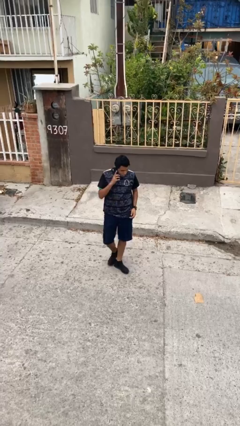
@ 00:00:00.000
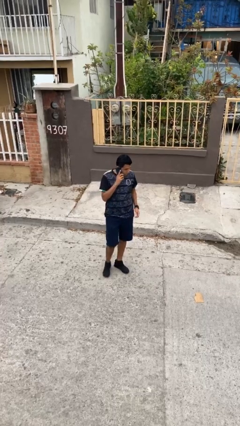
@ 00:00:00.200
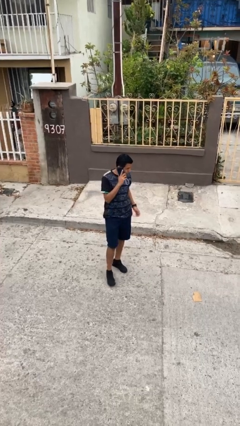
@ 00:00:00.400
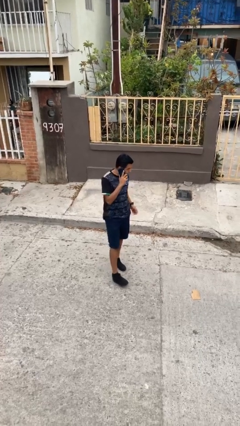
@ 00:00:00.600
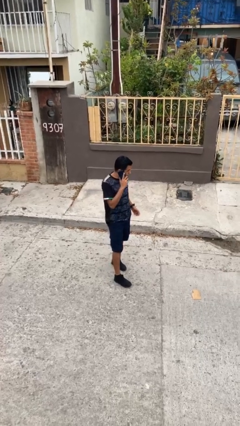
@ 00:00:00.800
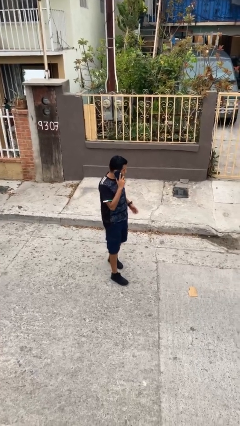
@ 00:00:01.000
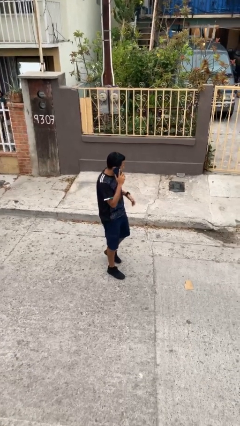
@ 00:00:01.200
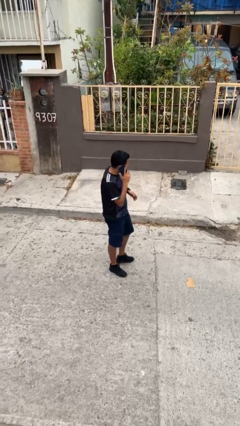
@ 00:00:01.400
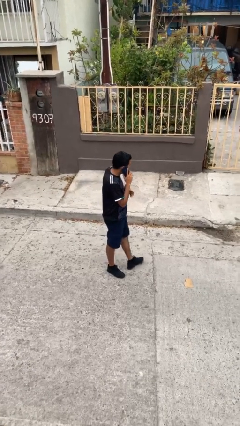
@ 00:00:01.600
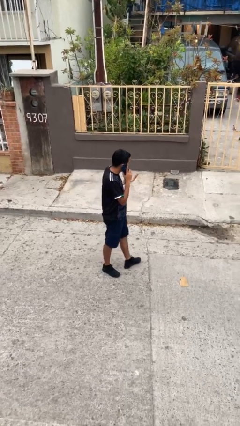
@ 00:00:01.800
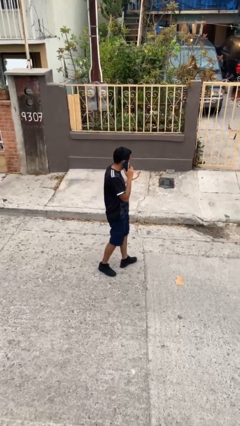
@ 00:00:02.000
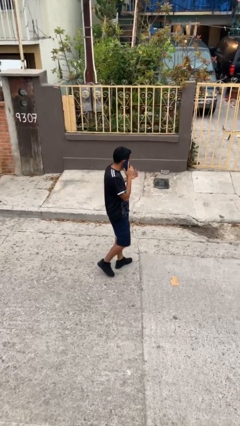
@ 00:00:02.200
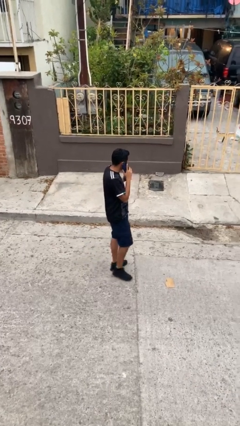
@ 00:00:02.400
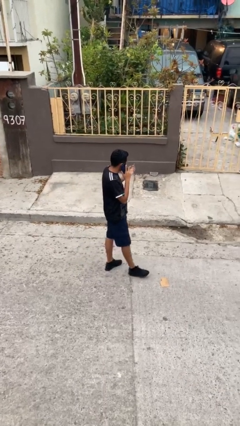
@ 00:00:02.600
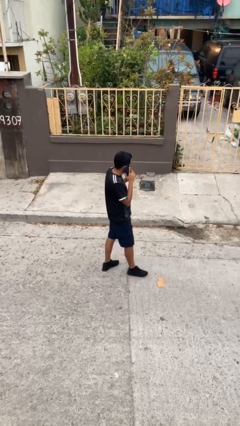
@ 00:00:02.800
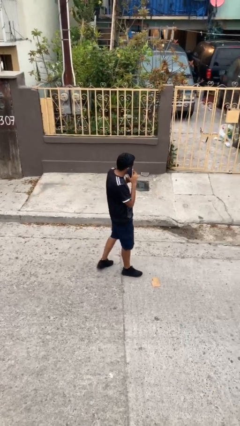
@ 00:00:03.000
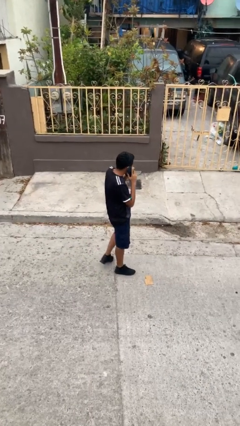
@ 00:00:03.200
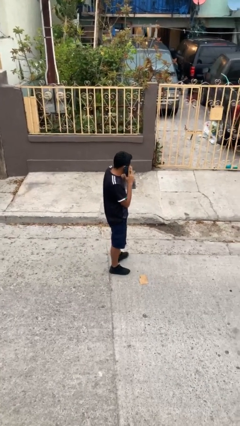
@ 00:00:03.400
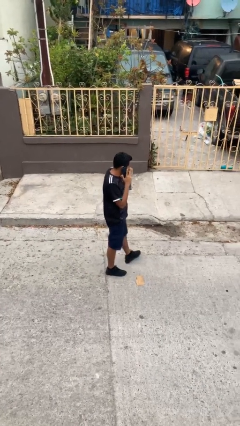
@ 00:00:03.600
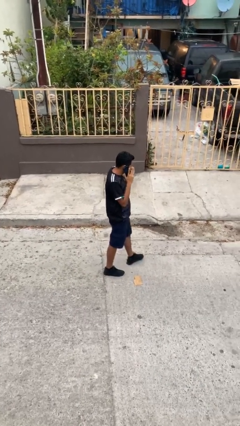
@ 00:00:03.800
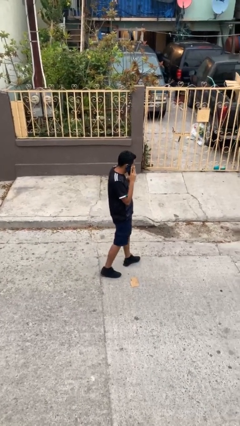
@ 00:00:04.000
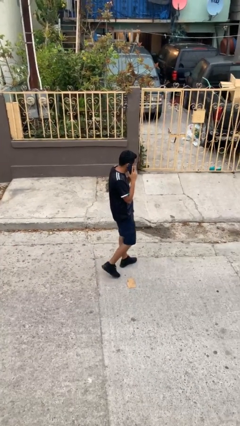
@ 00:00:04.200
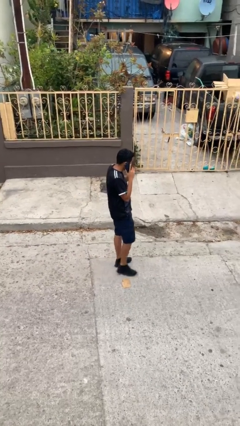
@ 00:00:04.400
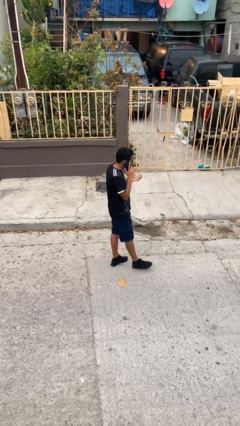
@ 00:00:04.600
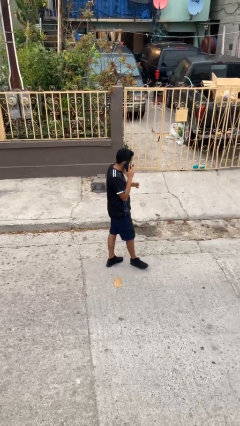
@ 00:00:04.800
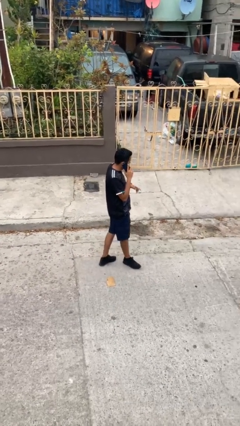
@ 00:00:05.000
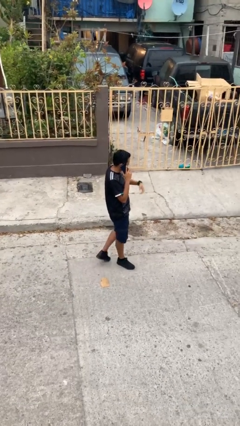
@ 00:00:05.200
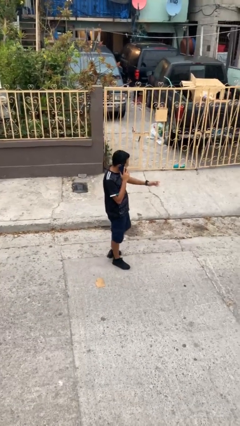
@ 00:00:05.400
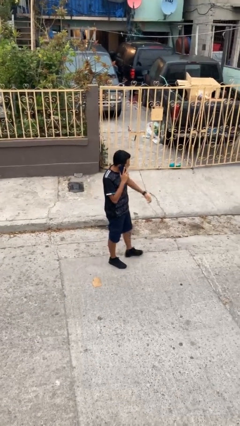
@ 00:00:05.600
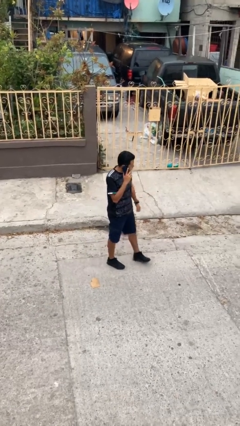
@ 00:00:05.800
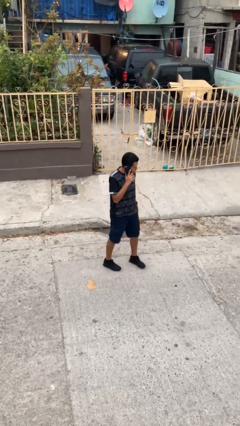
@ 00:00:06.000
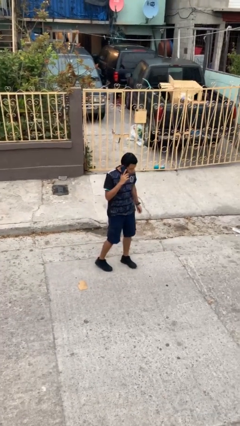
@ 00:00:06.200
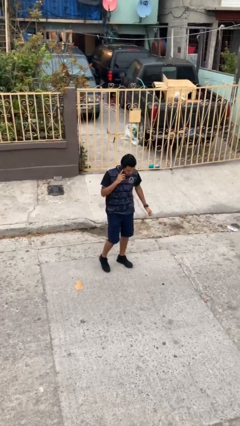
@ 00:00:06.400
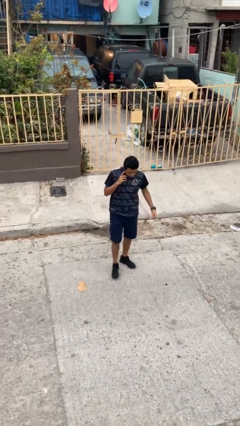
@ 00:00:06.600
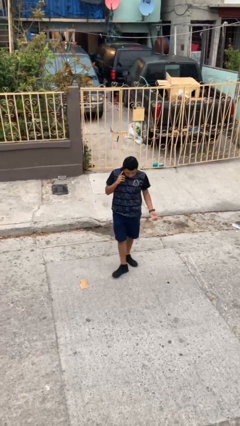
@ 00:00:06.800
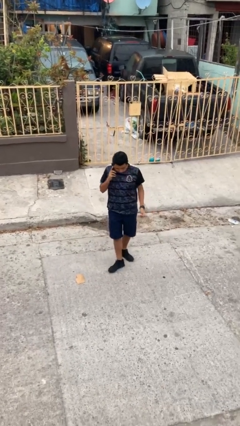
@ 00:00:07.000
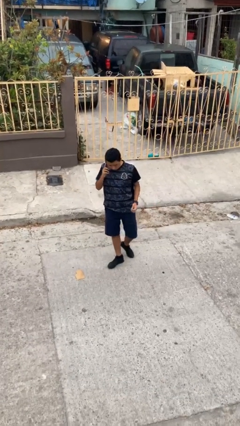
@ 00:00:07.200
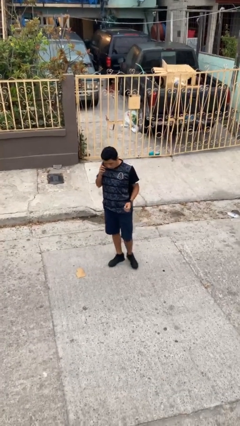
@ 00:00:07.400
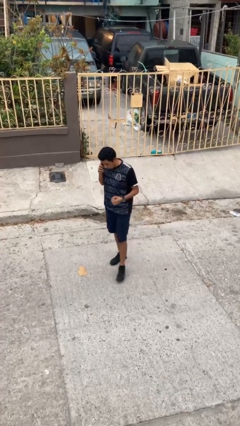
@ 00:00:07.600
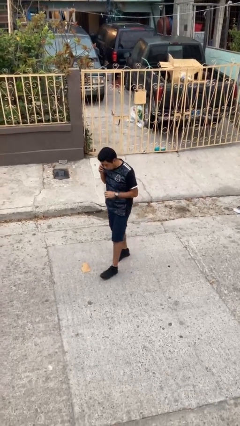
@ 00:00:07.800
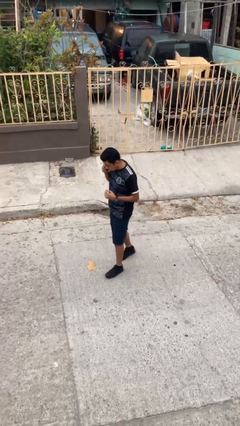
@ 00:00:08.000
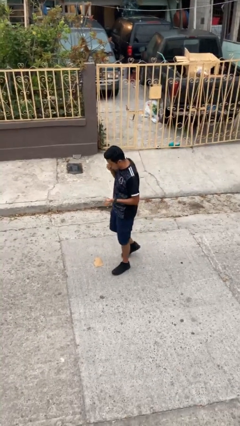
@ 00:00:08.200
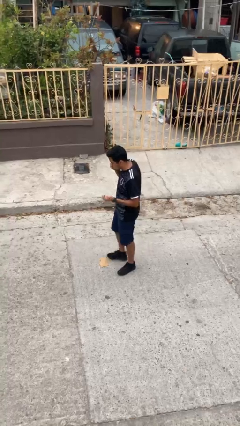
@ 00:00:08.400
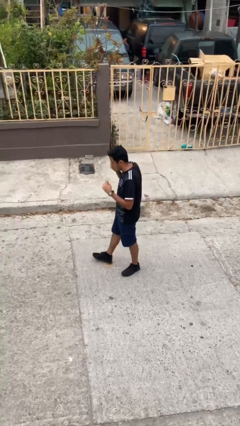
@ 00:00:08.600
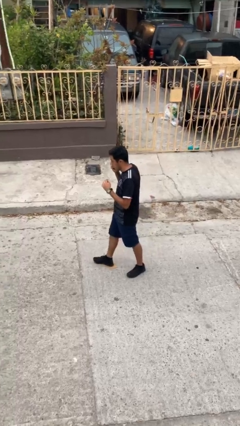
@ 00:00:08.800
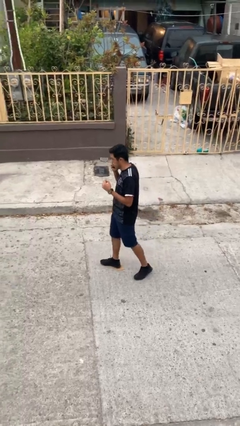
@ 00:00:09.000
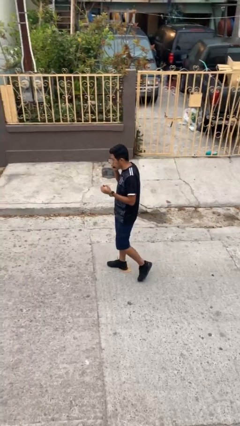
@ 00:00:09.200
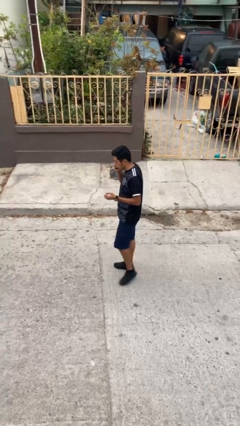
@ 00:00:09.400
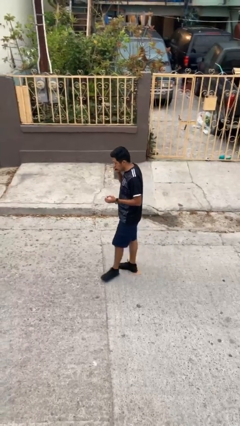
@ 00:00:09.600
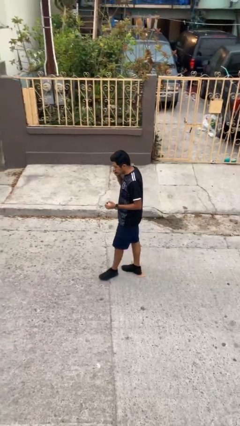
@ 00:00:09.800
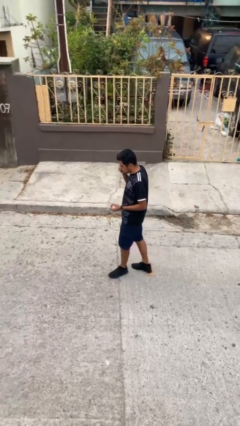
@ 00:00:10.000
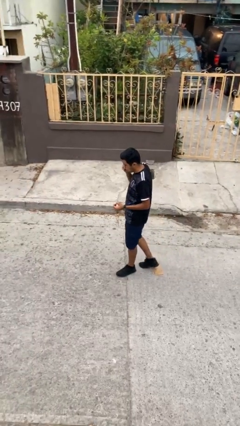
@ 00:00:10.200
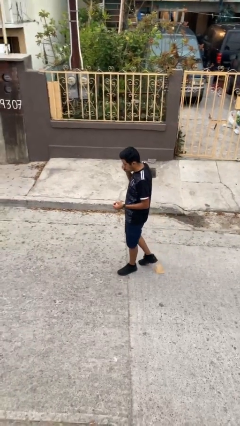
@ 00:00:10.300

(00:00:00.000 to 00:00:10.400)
person talks on phone

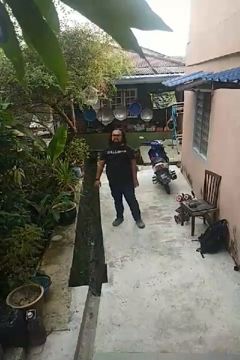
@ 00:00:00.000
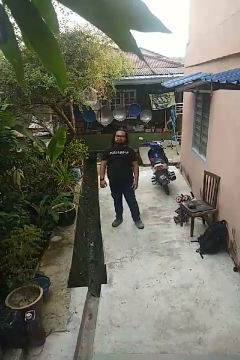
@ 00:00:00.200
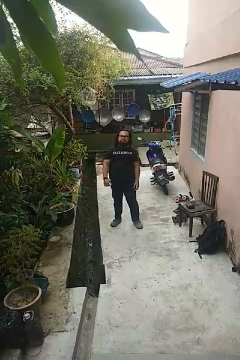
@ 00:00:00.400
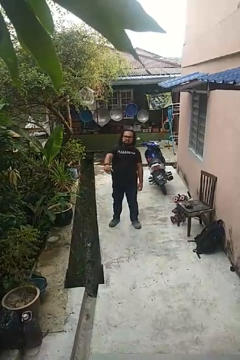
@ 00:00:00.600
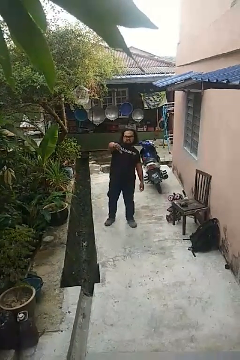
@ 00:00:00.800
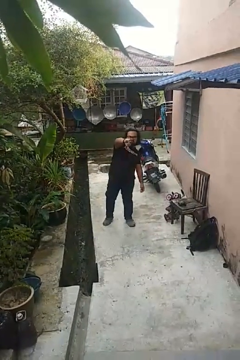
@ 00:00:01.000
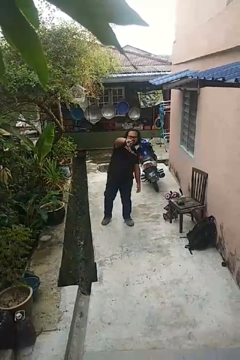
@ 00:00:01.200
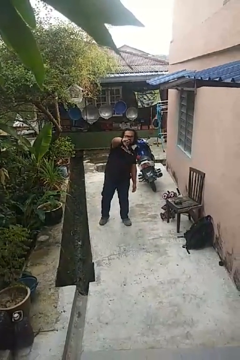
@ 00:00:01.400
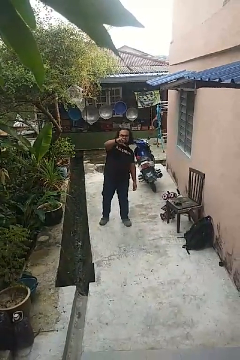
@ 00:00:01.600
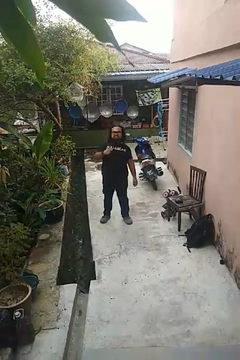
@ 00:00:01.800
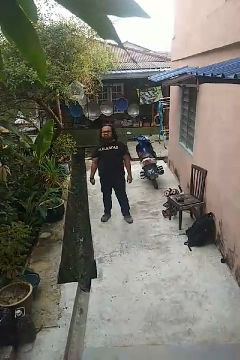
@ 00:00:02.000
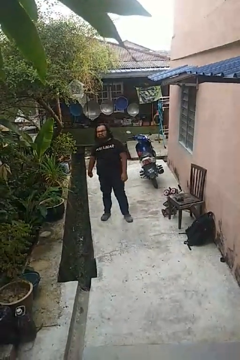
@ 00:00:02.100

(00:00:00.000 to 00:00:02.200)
person gestures thumbs down

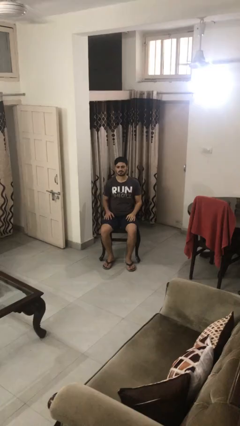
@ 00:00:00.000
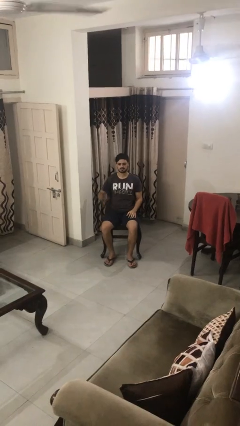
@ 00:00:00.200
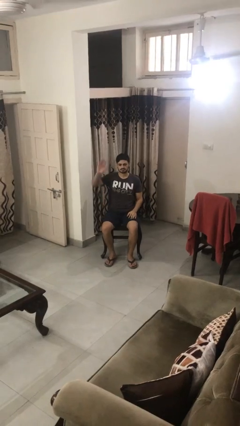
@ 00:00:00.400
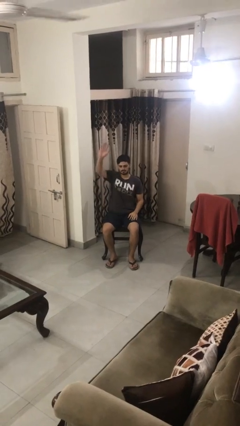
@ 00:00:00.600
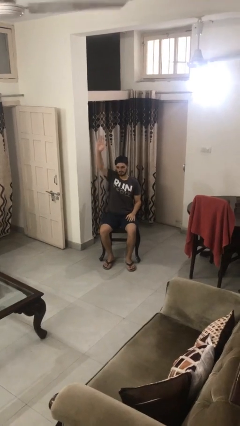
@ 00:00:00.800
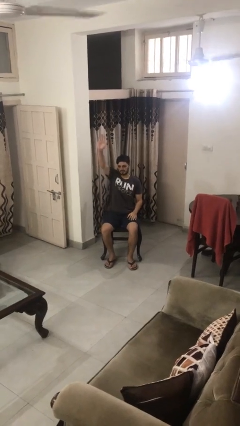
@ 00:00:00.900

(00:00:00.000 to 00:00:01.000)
person gestures raise hand

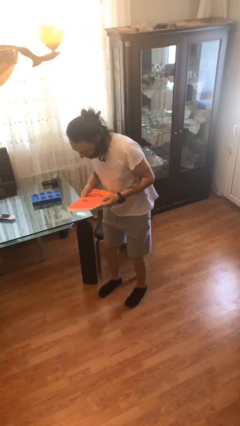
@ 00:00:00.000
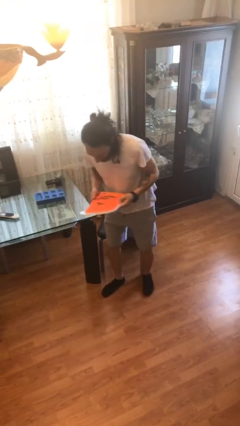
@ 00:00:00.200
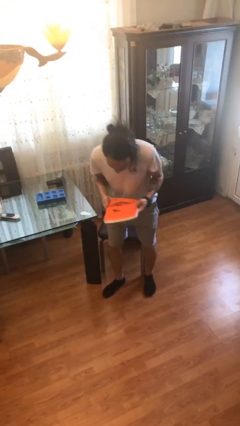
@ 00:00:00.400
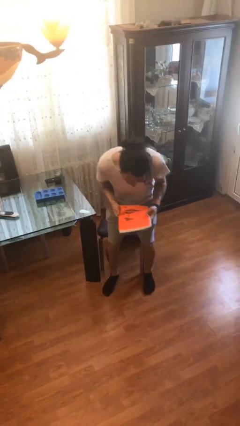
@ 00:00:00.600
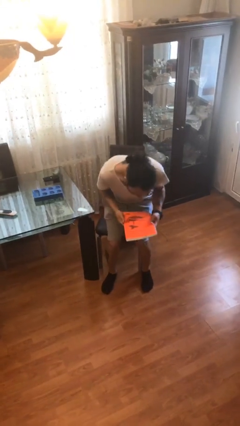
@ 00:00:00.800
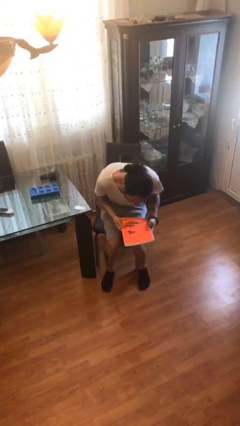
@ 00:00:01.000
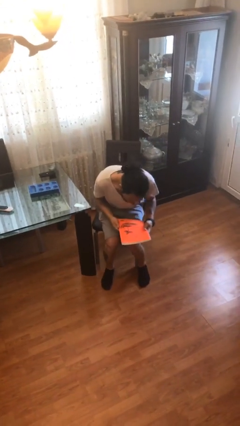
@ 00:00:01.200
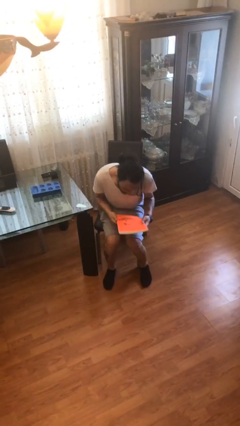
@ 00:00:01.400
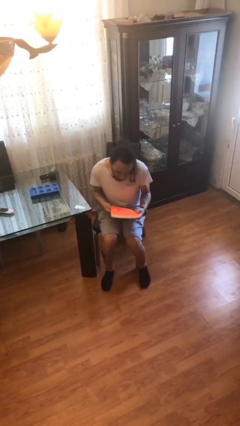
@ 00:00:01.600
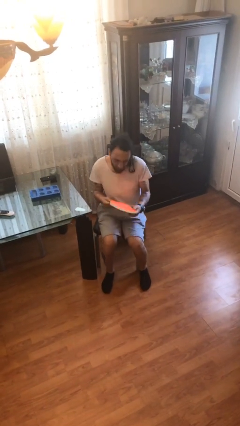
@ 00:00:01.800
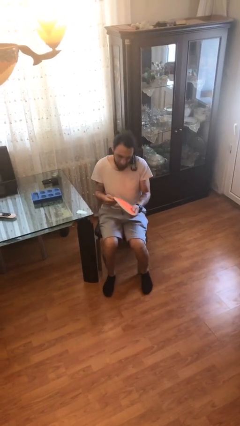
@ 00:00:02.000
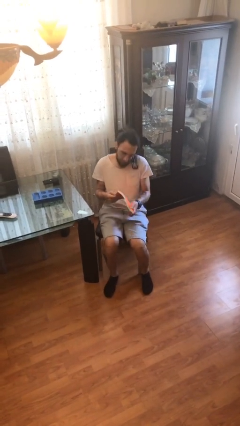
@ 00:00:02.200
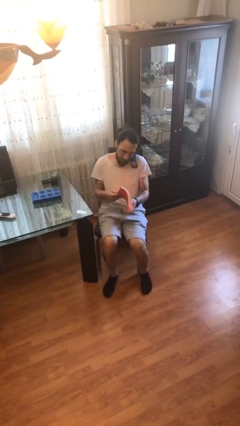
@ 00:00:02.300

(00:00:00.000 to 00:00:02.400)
person sits down

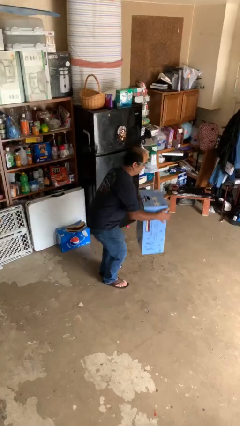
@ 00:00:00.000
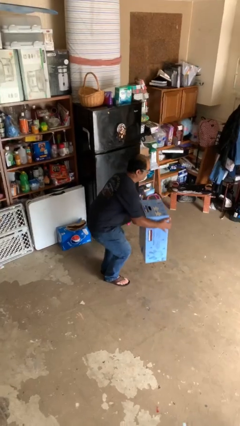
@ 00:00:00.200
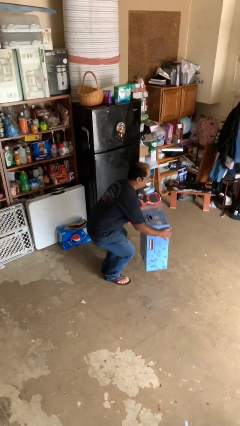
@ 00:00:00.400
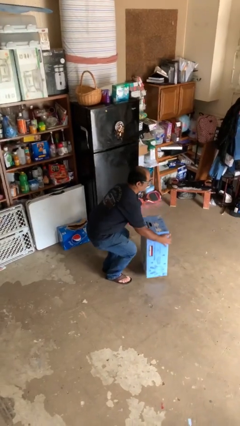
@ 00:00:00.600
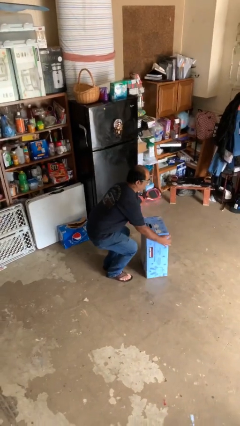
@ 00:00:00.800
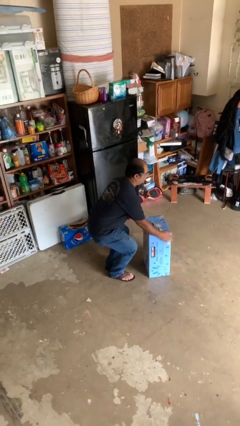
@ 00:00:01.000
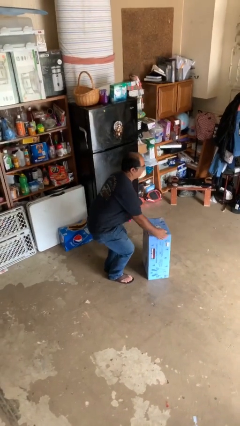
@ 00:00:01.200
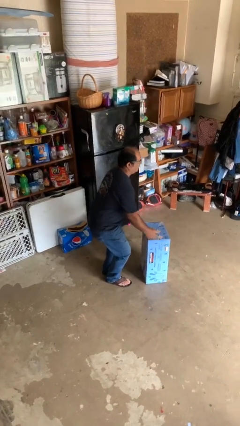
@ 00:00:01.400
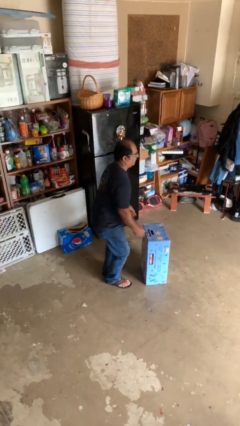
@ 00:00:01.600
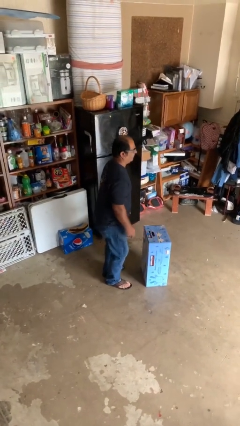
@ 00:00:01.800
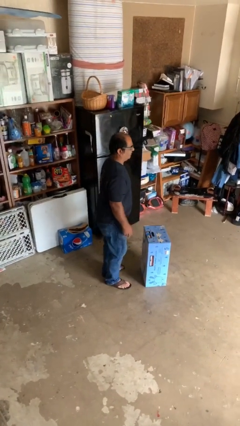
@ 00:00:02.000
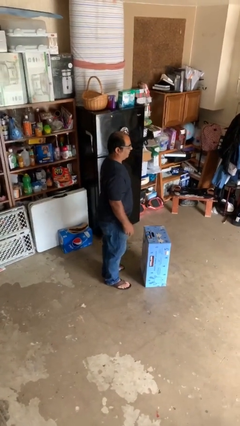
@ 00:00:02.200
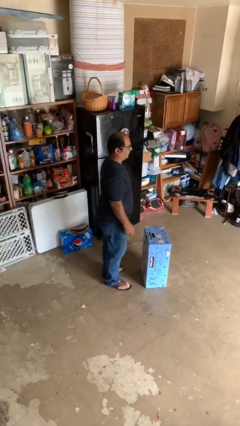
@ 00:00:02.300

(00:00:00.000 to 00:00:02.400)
person puts down object on floor
